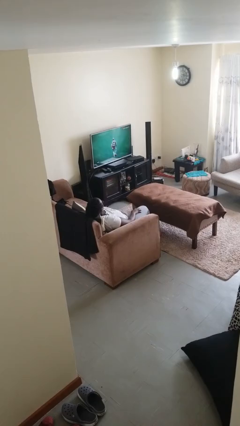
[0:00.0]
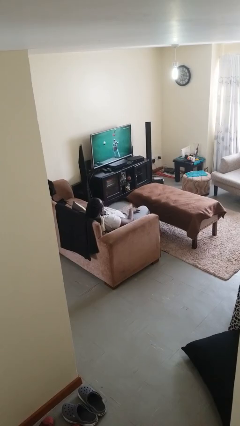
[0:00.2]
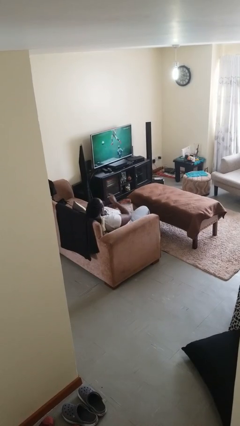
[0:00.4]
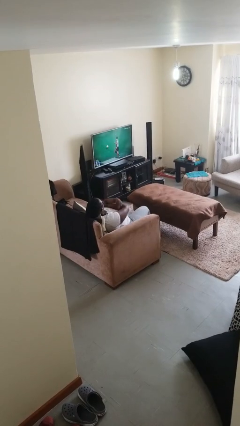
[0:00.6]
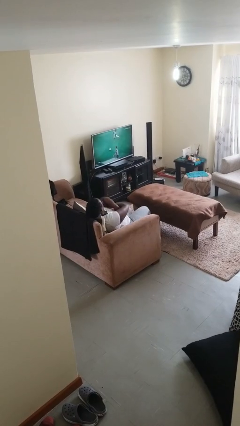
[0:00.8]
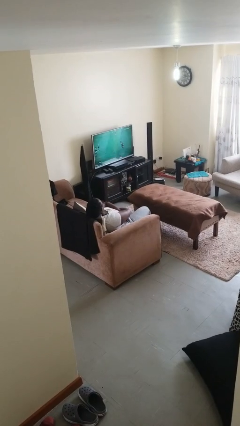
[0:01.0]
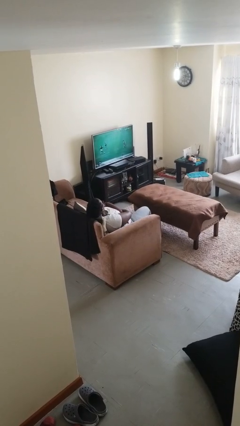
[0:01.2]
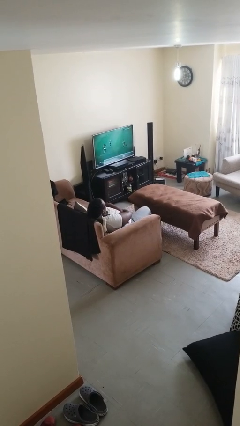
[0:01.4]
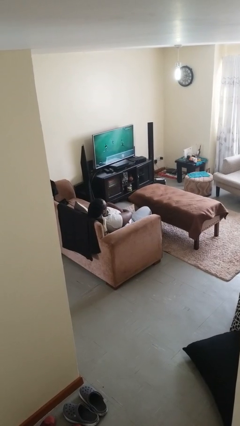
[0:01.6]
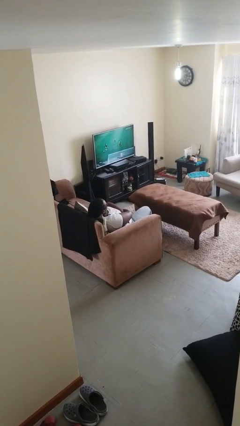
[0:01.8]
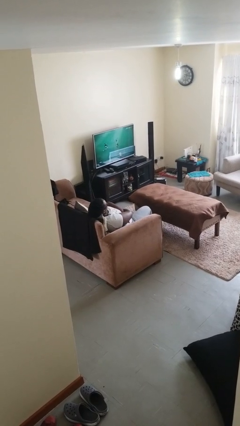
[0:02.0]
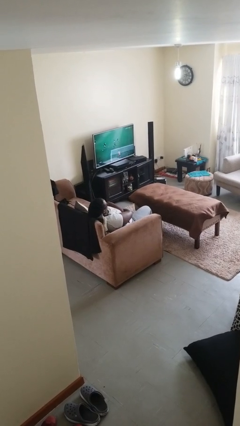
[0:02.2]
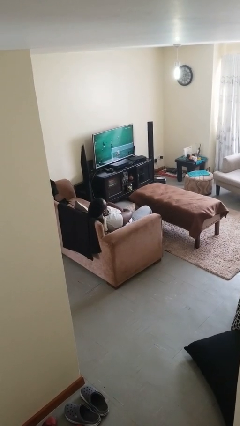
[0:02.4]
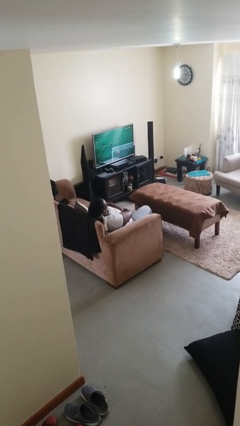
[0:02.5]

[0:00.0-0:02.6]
person crosses arms

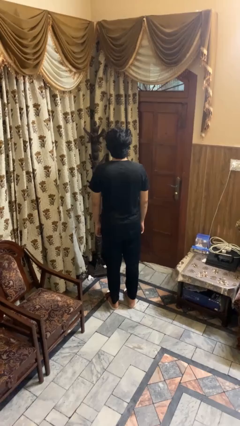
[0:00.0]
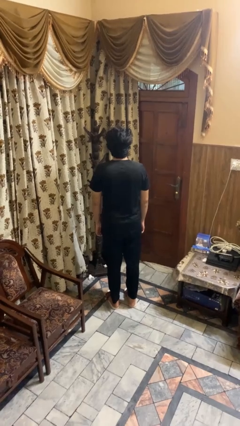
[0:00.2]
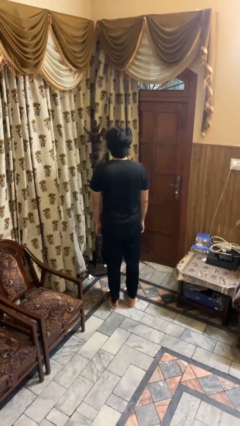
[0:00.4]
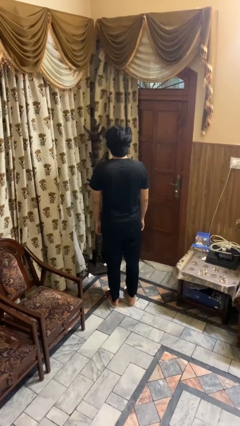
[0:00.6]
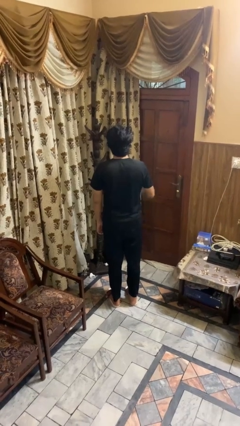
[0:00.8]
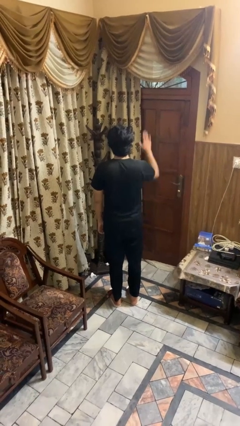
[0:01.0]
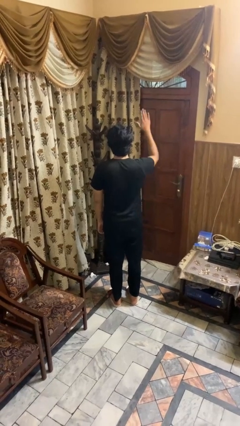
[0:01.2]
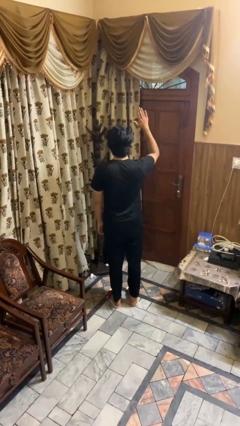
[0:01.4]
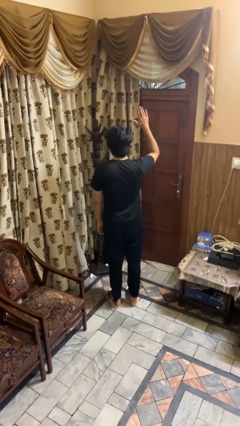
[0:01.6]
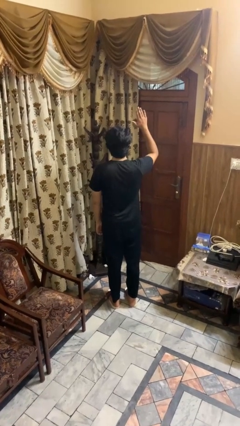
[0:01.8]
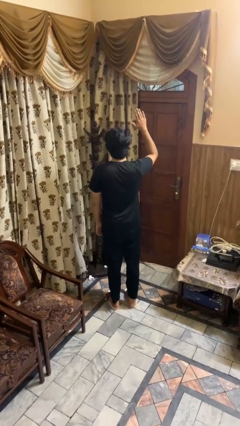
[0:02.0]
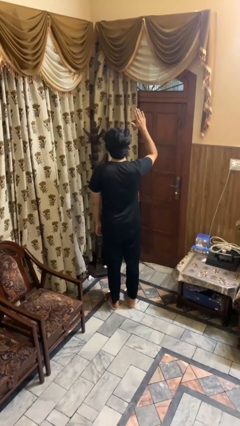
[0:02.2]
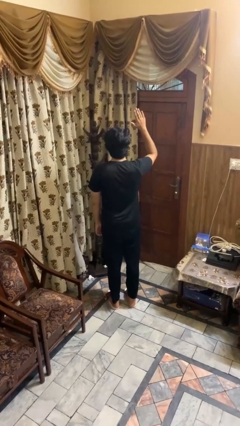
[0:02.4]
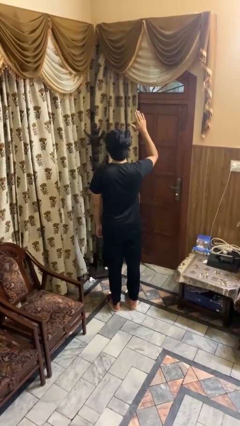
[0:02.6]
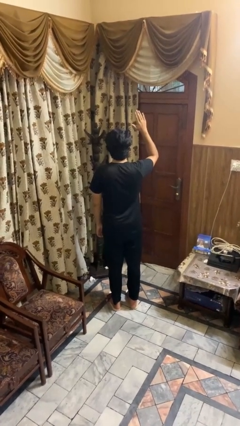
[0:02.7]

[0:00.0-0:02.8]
person gestures raise hand

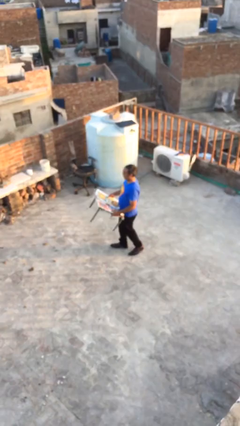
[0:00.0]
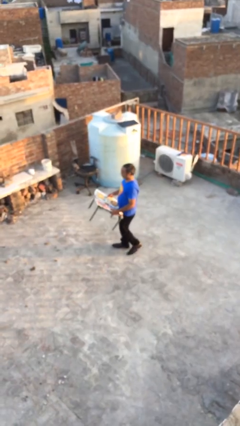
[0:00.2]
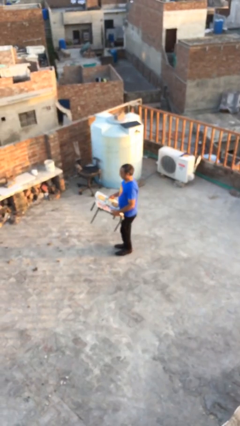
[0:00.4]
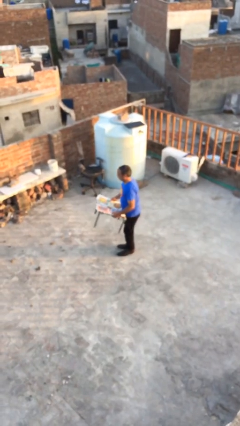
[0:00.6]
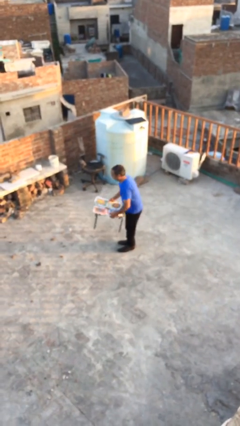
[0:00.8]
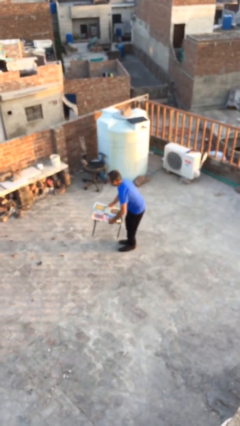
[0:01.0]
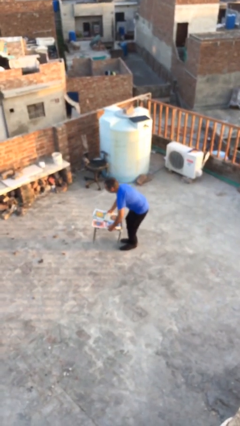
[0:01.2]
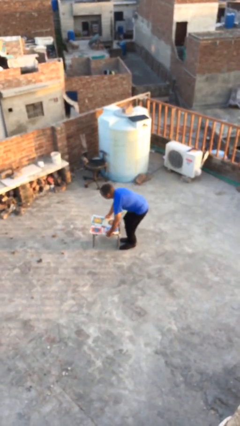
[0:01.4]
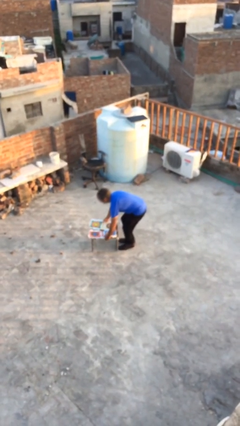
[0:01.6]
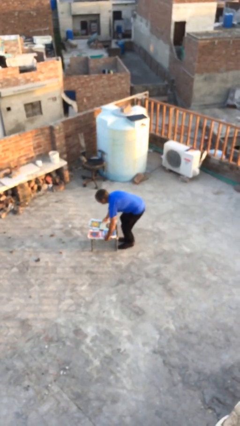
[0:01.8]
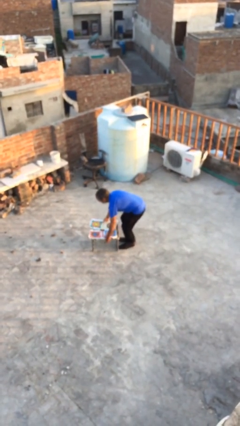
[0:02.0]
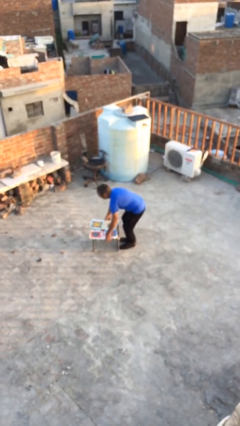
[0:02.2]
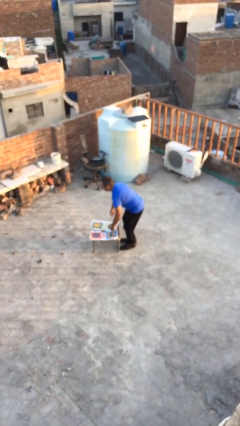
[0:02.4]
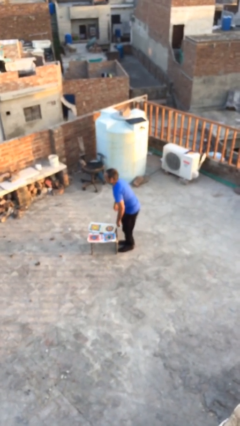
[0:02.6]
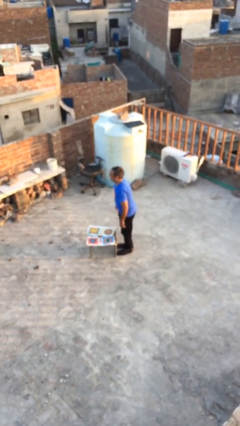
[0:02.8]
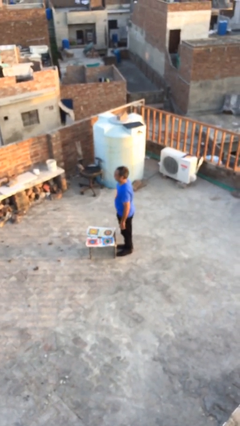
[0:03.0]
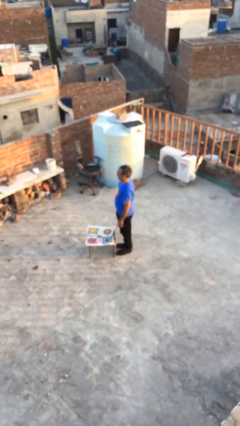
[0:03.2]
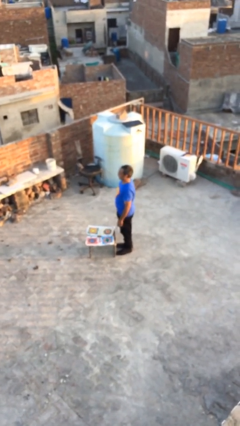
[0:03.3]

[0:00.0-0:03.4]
person puts down object on floor

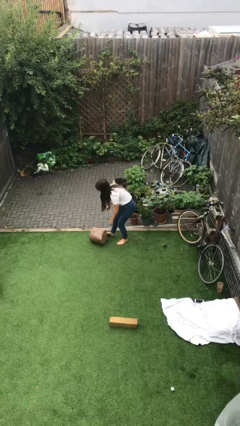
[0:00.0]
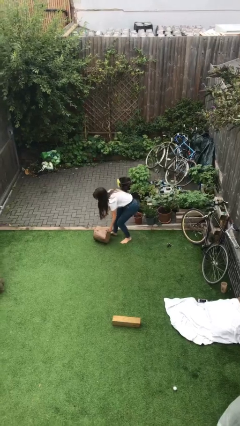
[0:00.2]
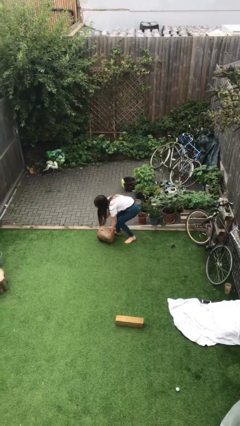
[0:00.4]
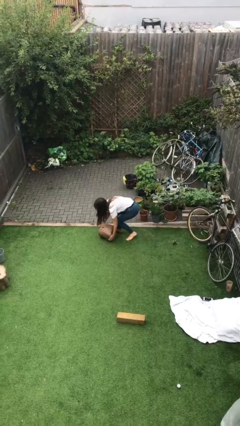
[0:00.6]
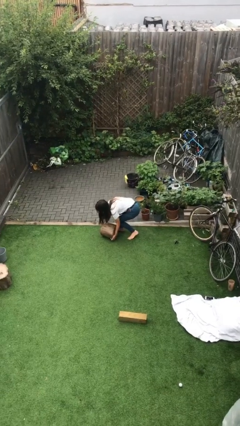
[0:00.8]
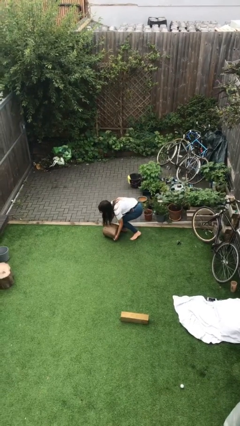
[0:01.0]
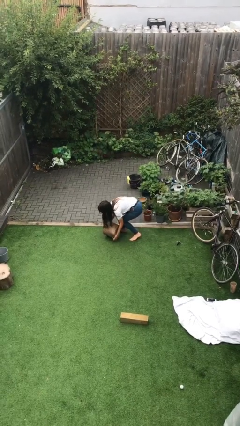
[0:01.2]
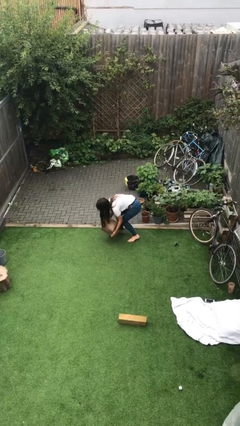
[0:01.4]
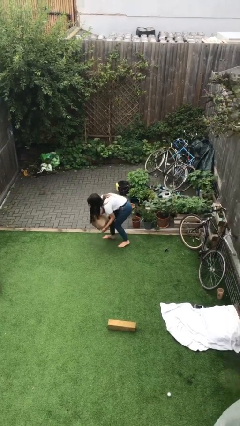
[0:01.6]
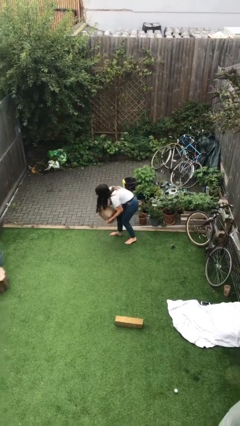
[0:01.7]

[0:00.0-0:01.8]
person picks up object from floor

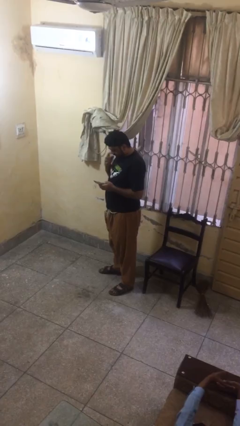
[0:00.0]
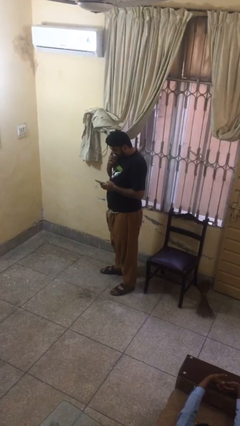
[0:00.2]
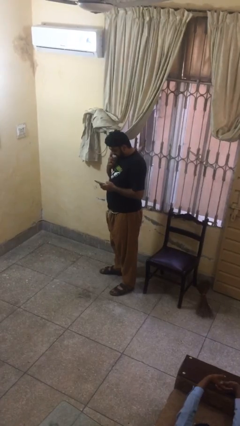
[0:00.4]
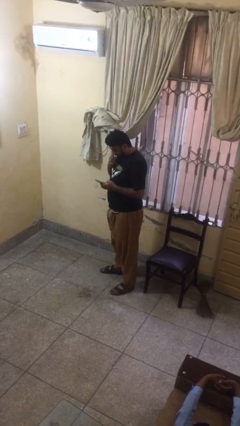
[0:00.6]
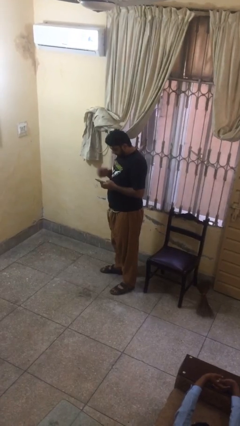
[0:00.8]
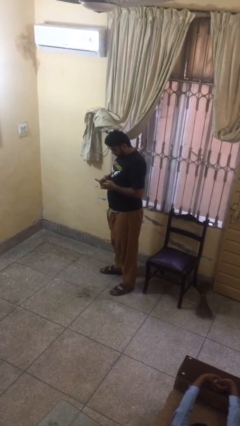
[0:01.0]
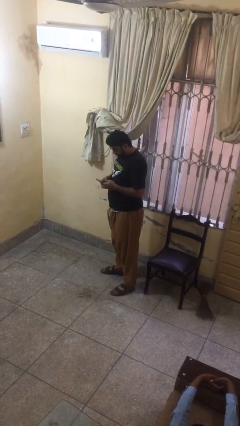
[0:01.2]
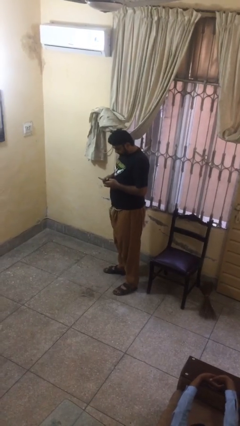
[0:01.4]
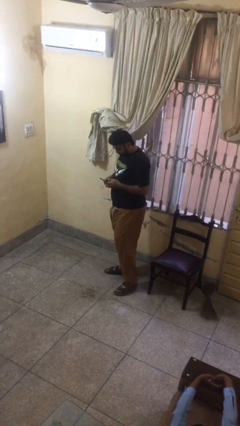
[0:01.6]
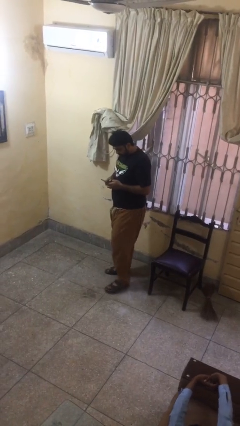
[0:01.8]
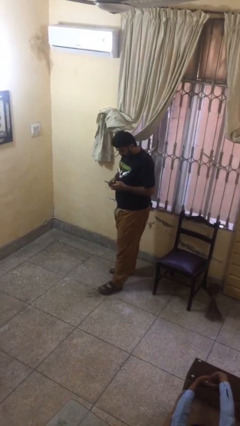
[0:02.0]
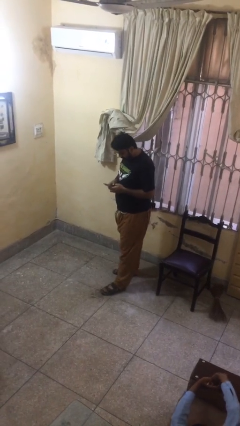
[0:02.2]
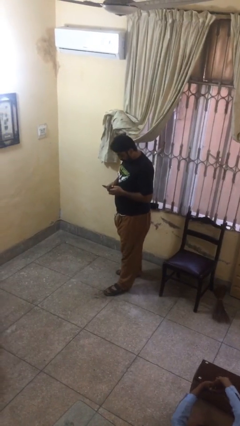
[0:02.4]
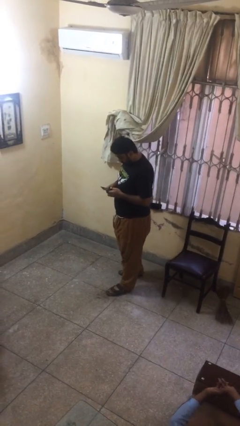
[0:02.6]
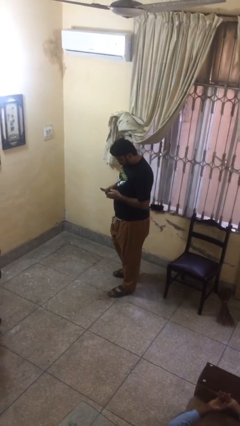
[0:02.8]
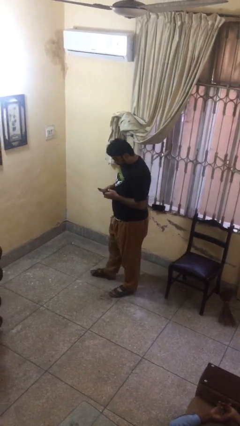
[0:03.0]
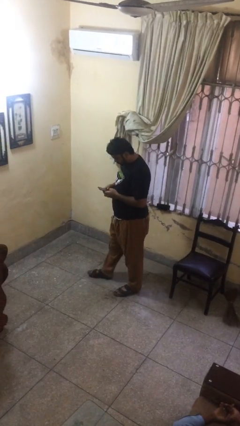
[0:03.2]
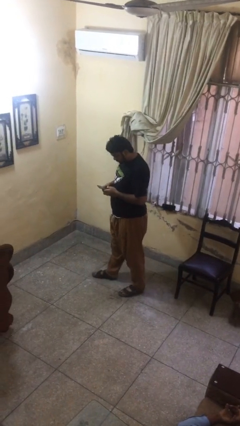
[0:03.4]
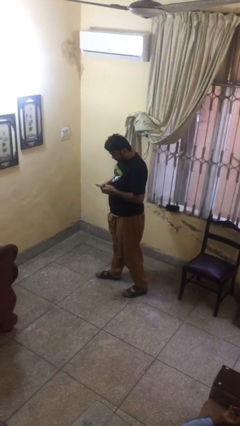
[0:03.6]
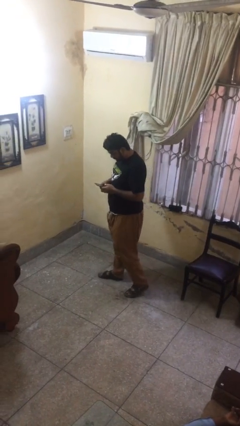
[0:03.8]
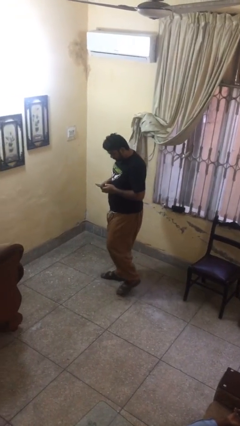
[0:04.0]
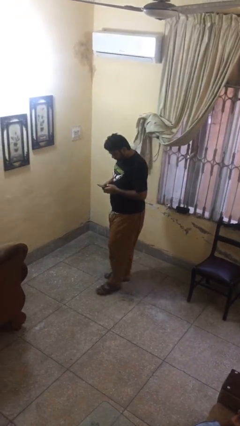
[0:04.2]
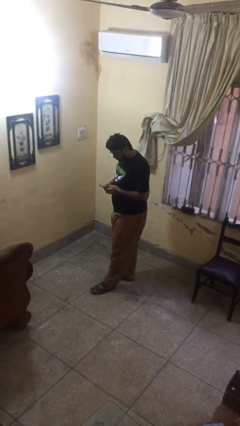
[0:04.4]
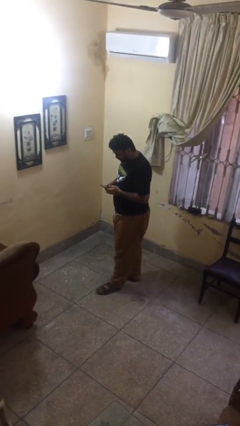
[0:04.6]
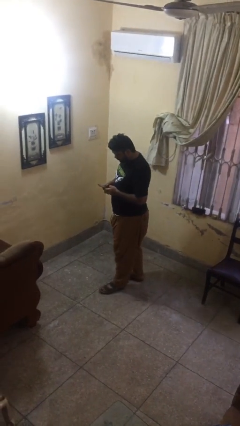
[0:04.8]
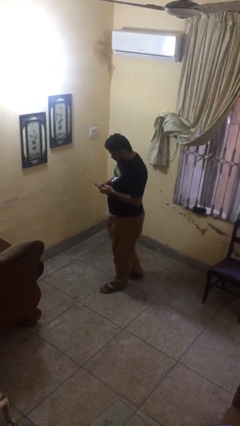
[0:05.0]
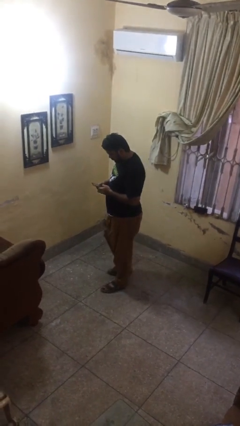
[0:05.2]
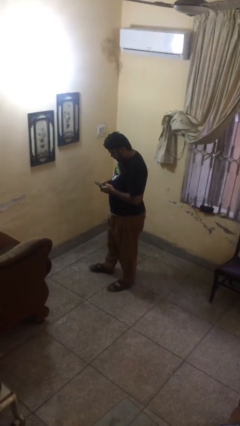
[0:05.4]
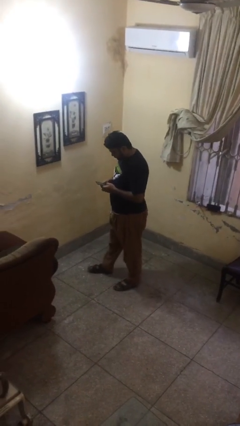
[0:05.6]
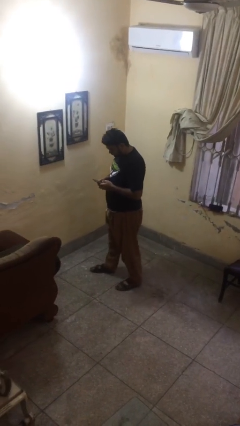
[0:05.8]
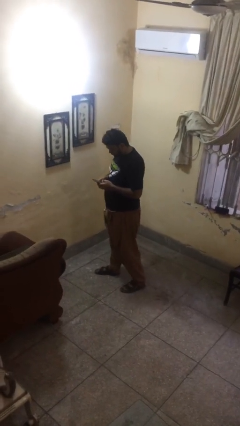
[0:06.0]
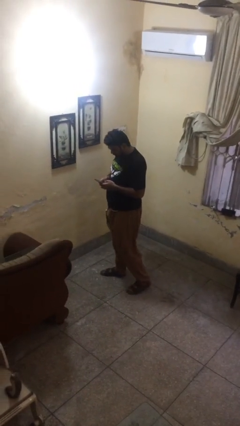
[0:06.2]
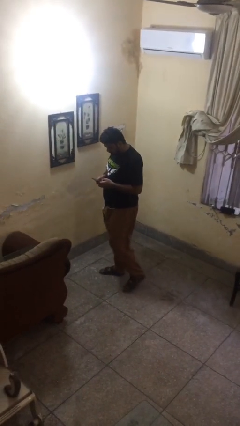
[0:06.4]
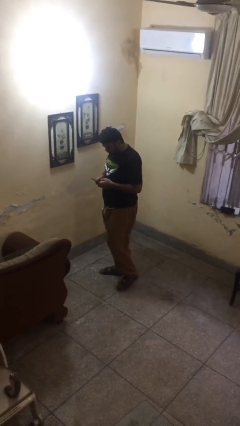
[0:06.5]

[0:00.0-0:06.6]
person texts on phone

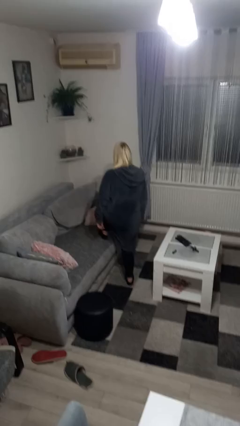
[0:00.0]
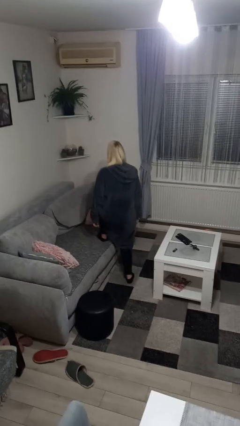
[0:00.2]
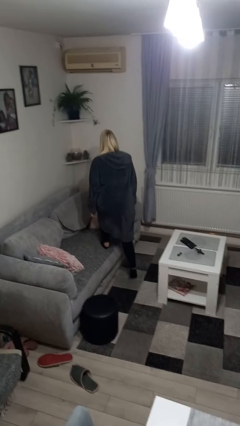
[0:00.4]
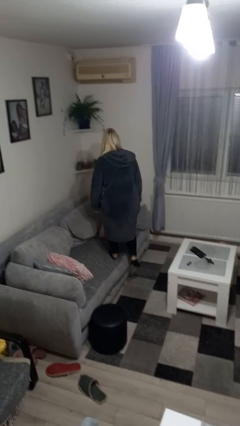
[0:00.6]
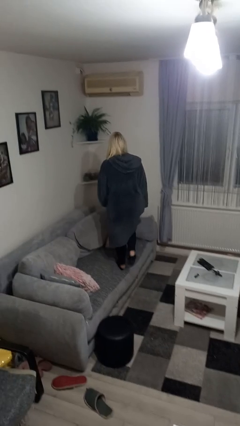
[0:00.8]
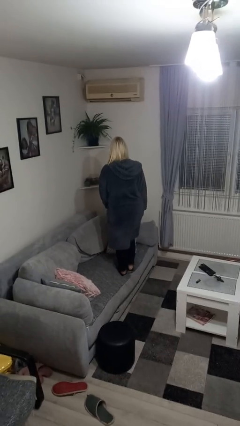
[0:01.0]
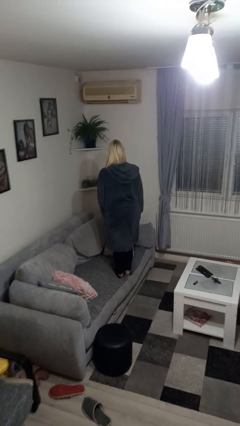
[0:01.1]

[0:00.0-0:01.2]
person climbs on couch
